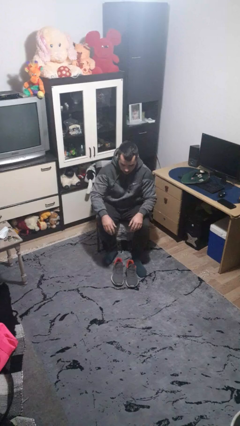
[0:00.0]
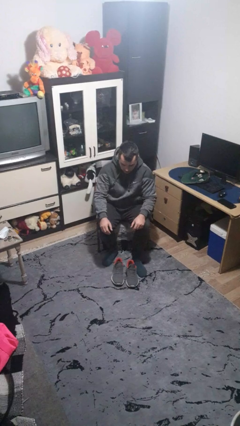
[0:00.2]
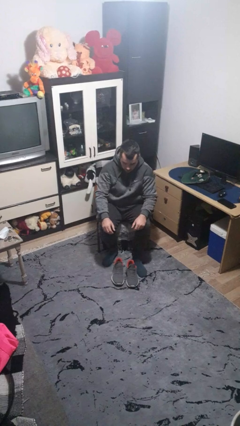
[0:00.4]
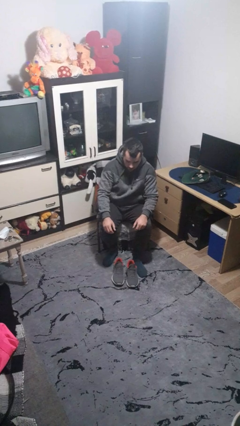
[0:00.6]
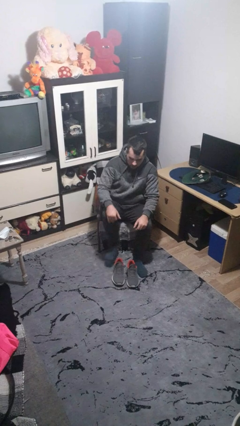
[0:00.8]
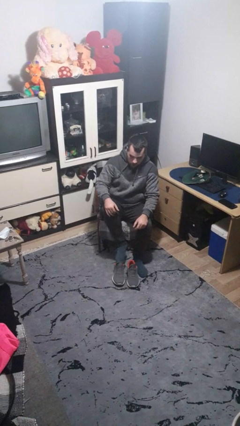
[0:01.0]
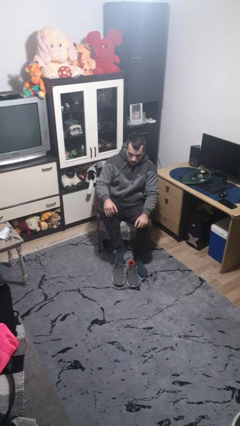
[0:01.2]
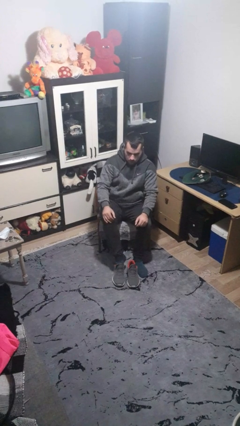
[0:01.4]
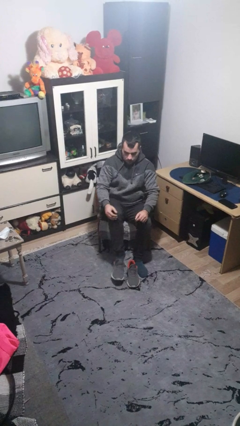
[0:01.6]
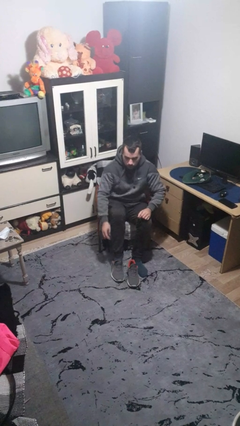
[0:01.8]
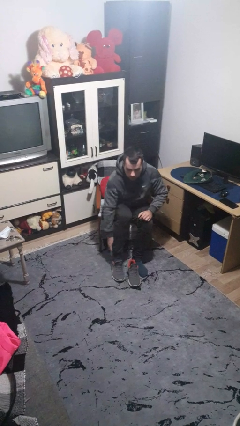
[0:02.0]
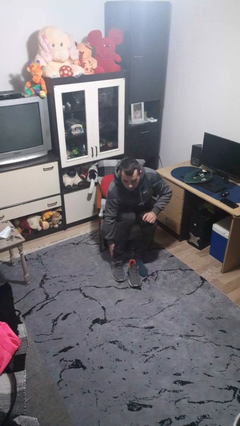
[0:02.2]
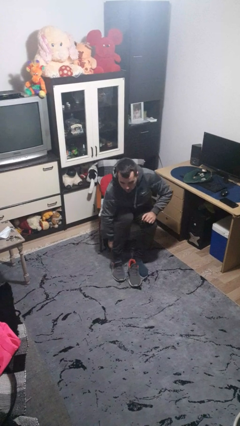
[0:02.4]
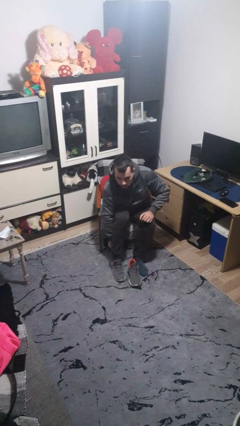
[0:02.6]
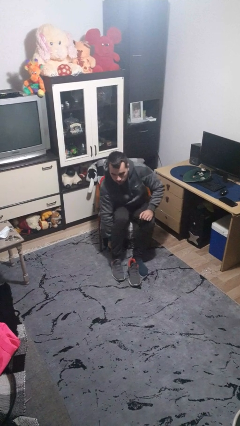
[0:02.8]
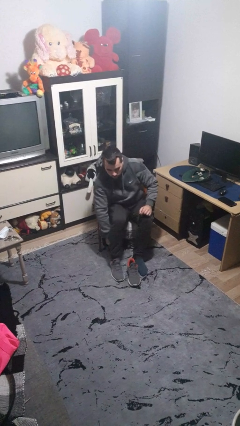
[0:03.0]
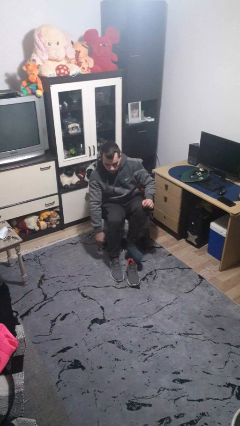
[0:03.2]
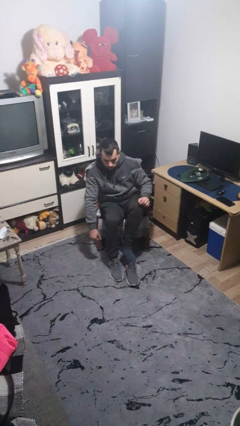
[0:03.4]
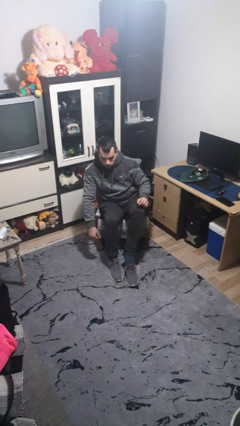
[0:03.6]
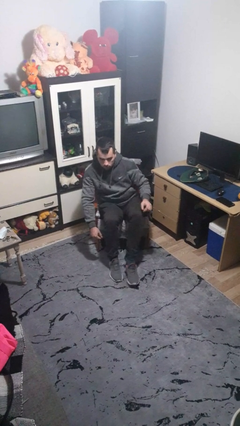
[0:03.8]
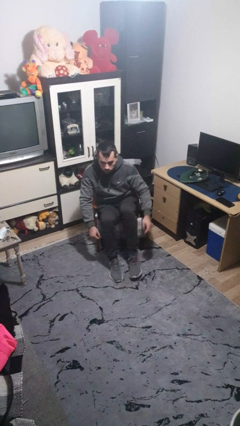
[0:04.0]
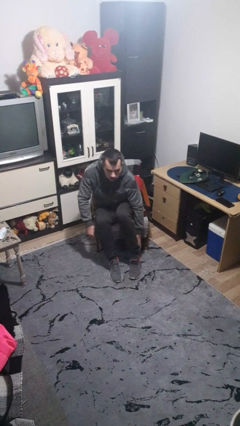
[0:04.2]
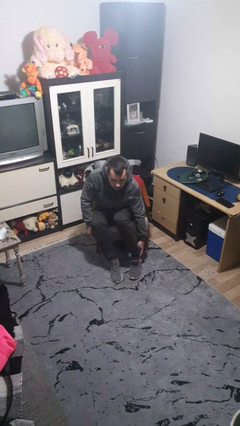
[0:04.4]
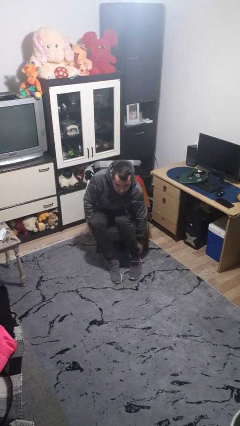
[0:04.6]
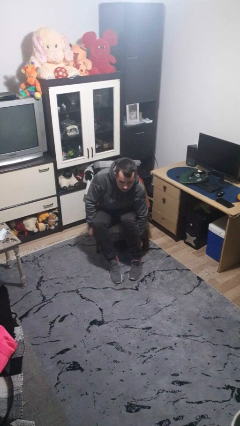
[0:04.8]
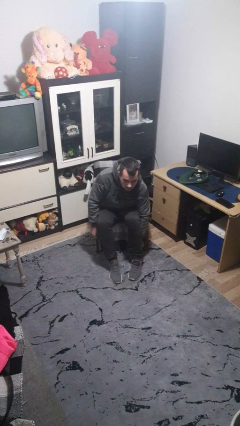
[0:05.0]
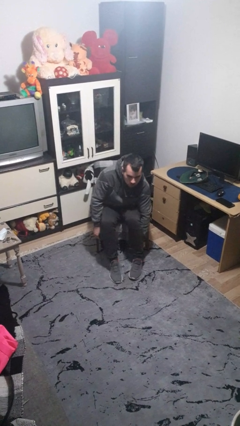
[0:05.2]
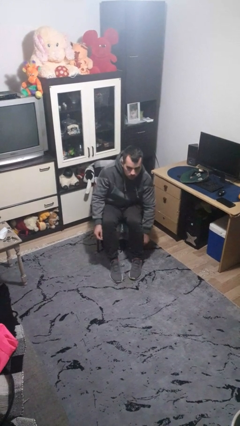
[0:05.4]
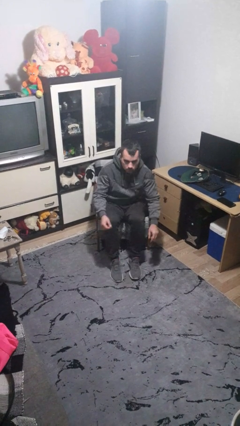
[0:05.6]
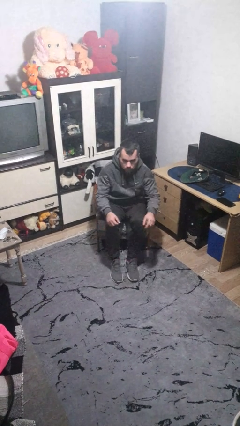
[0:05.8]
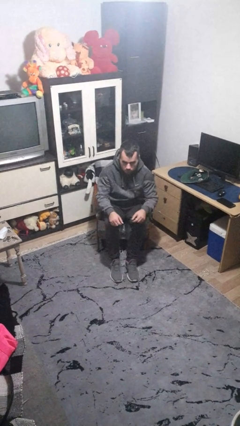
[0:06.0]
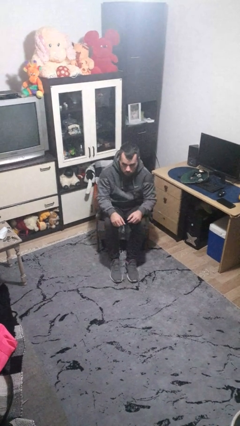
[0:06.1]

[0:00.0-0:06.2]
person puts on shoes

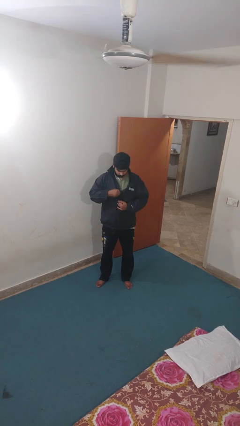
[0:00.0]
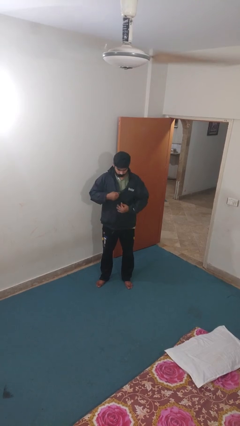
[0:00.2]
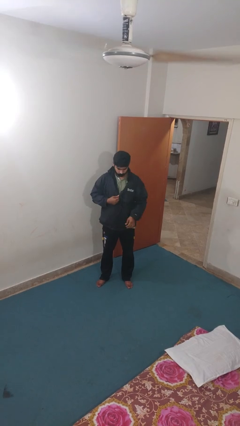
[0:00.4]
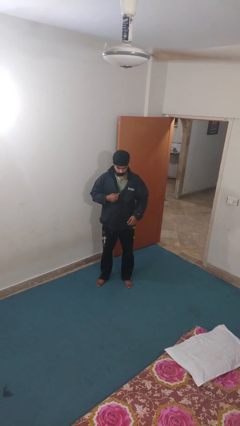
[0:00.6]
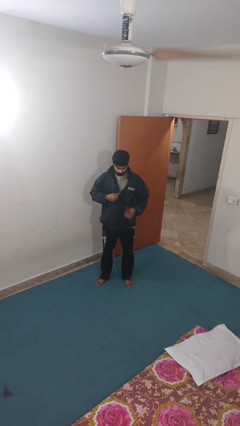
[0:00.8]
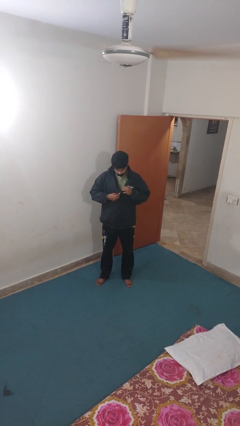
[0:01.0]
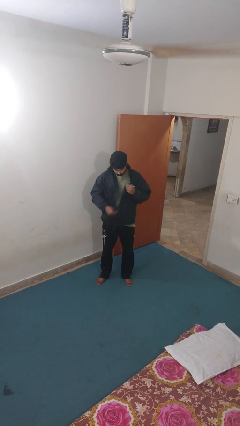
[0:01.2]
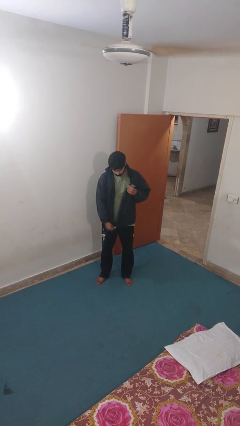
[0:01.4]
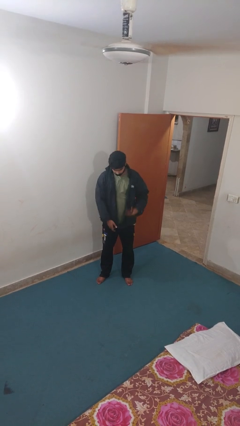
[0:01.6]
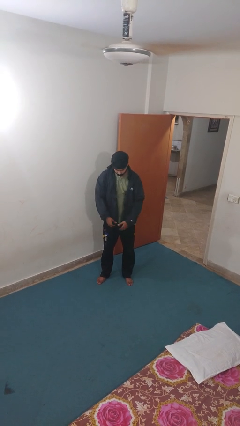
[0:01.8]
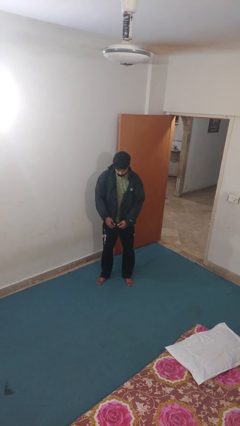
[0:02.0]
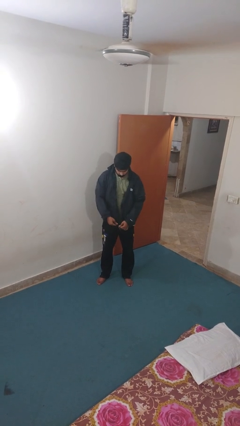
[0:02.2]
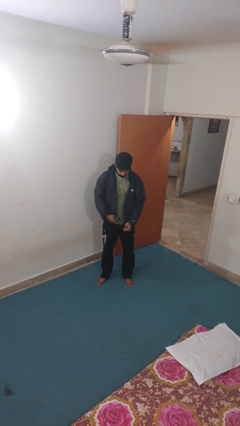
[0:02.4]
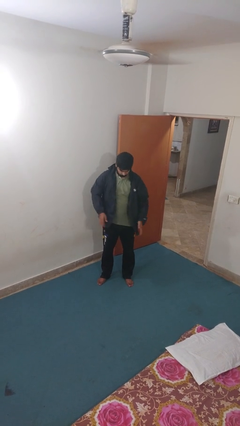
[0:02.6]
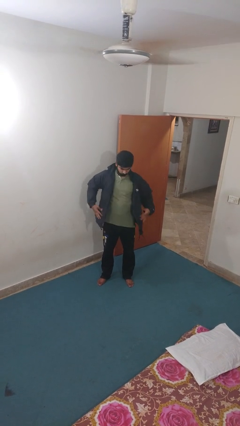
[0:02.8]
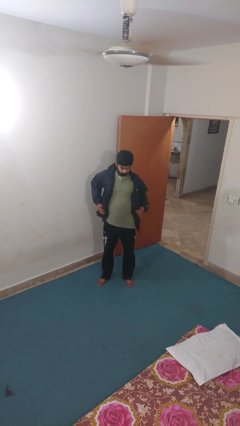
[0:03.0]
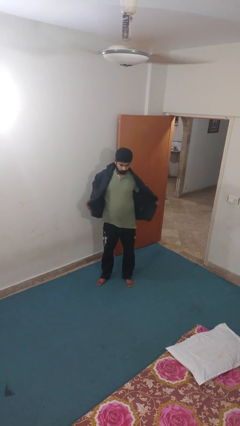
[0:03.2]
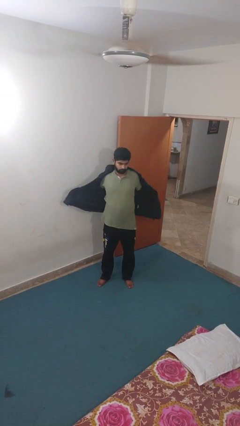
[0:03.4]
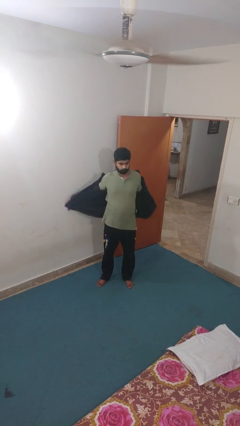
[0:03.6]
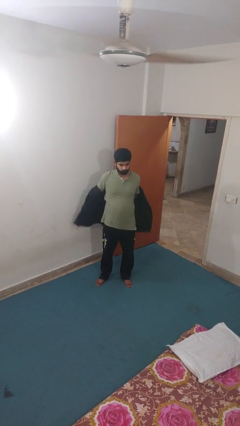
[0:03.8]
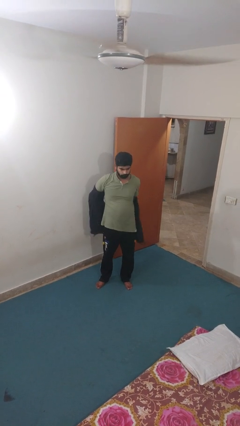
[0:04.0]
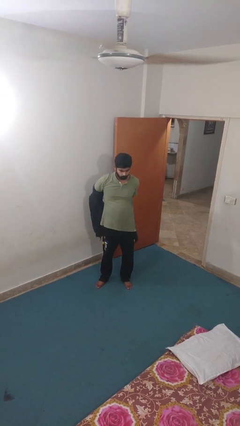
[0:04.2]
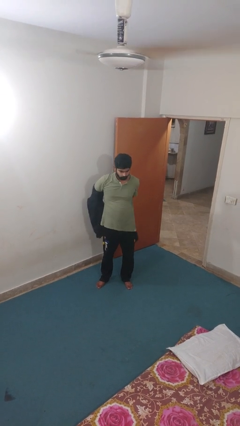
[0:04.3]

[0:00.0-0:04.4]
person unzips jacket

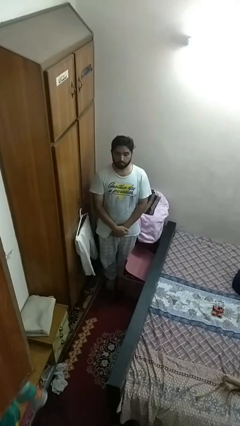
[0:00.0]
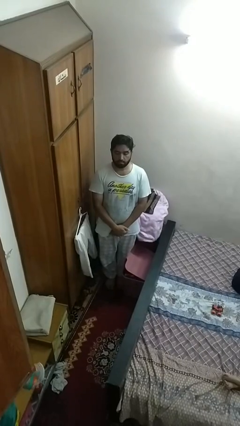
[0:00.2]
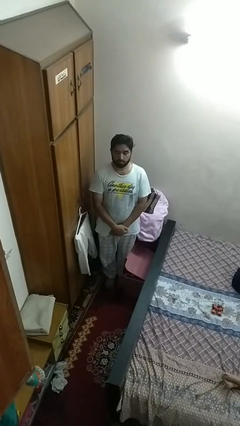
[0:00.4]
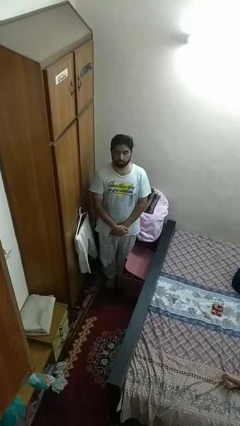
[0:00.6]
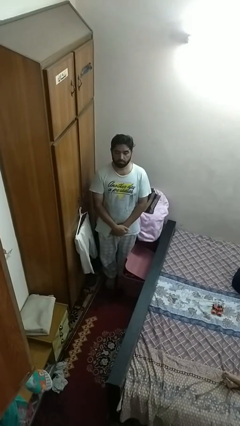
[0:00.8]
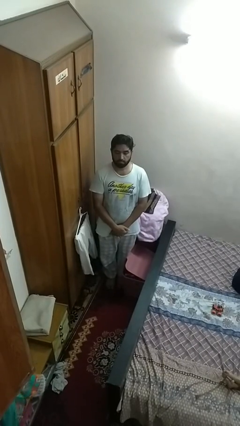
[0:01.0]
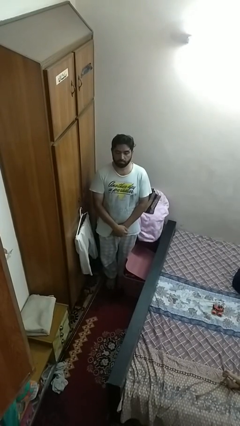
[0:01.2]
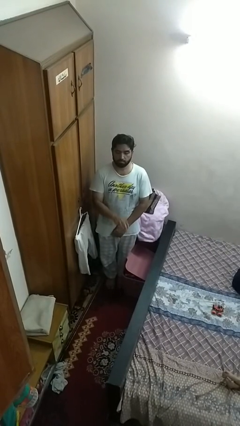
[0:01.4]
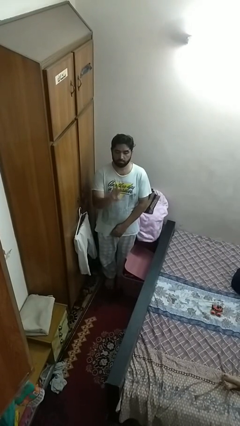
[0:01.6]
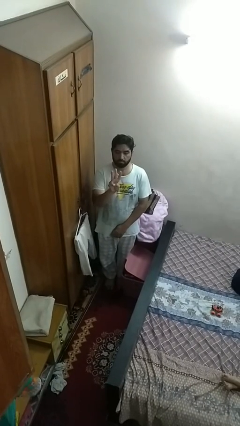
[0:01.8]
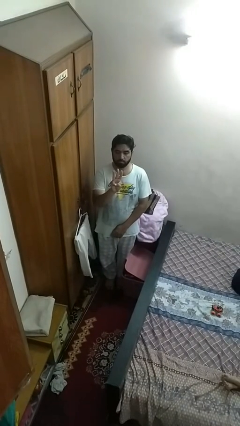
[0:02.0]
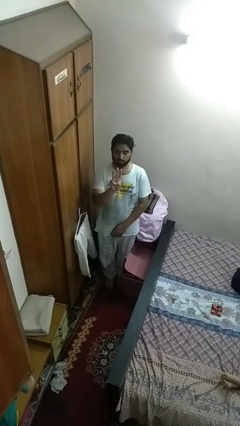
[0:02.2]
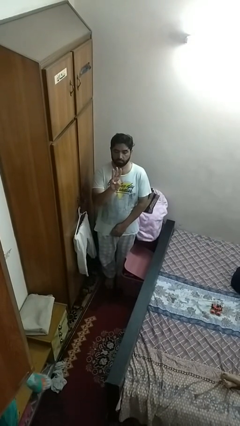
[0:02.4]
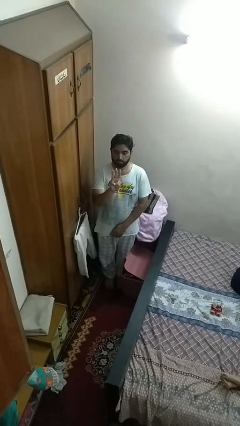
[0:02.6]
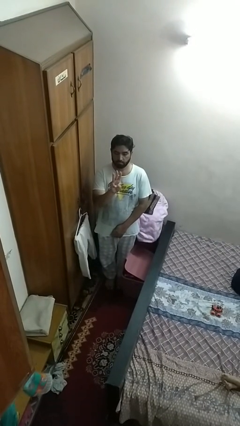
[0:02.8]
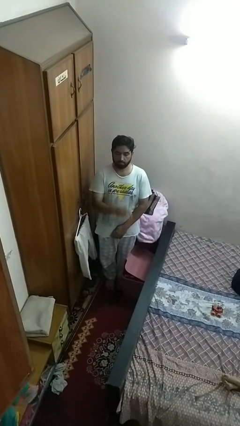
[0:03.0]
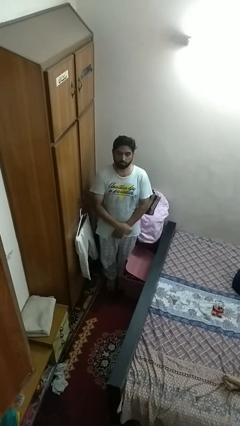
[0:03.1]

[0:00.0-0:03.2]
person gestures number three

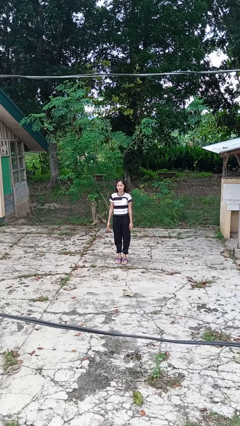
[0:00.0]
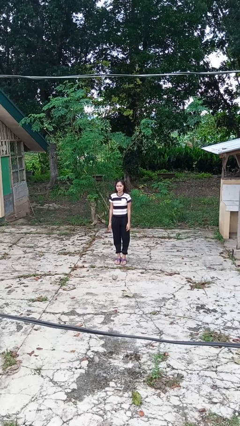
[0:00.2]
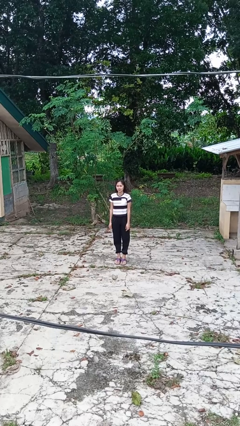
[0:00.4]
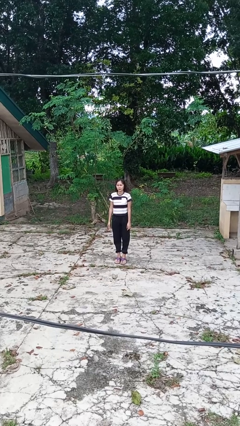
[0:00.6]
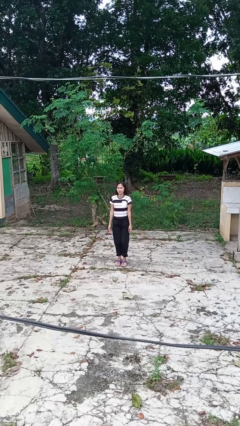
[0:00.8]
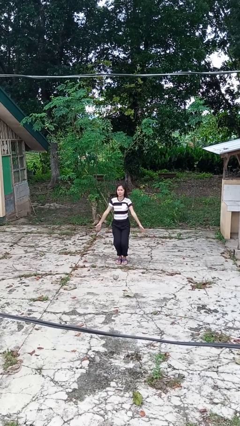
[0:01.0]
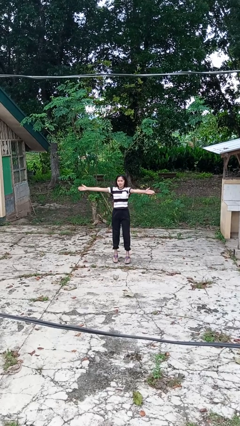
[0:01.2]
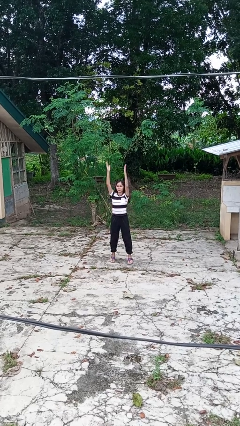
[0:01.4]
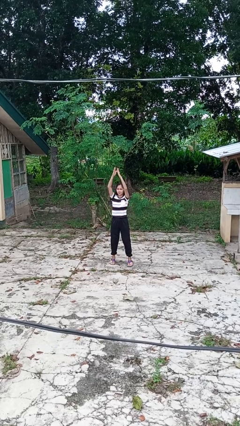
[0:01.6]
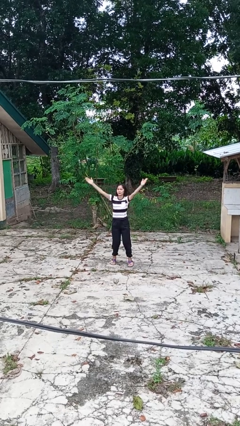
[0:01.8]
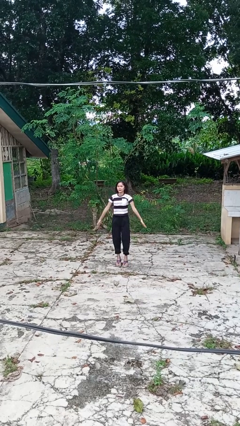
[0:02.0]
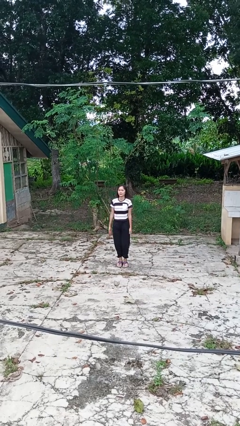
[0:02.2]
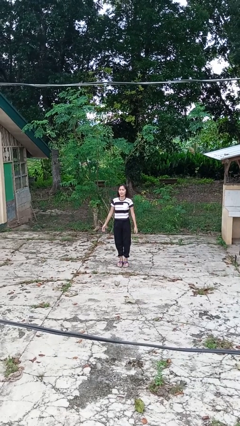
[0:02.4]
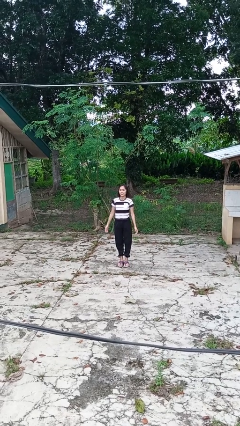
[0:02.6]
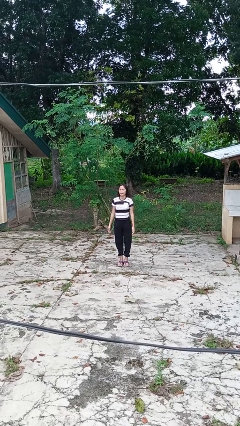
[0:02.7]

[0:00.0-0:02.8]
person exercises with jumping jacks

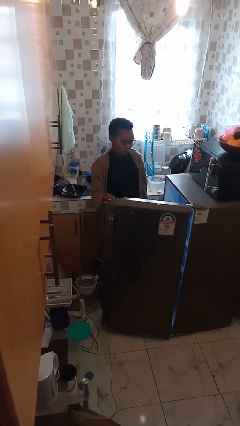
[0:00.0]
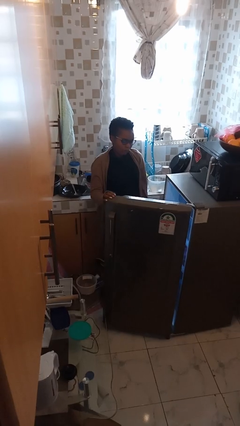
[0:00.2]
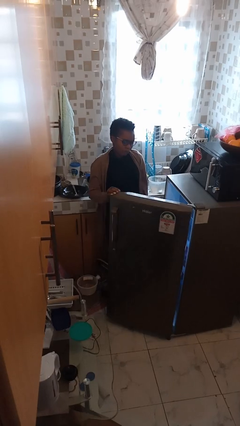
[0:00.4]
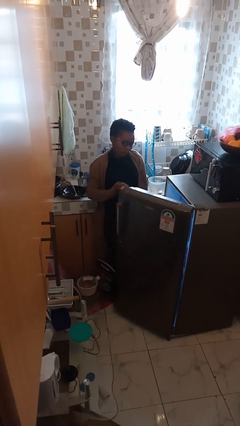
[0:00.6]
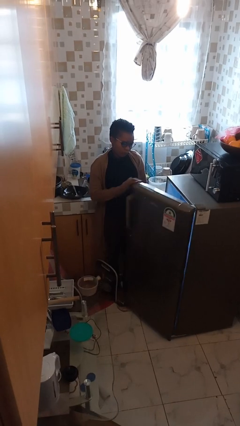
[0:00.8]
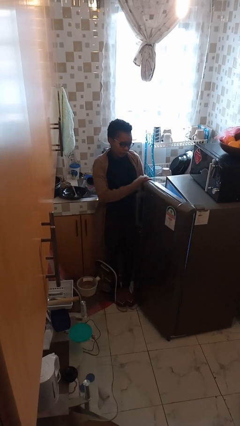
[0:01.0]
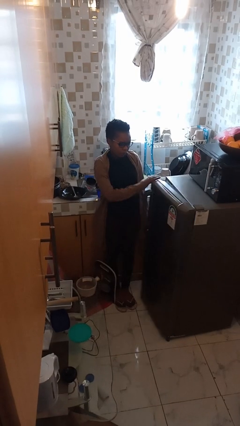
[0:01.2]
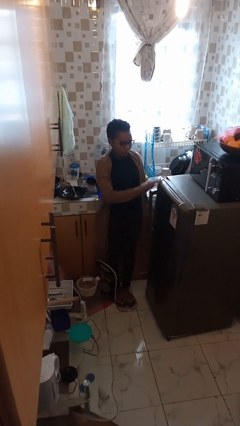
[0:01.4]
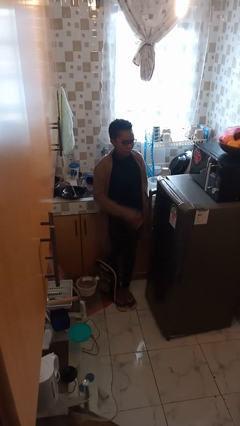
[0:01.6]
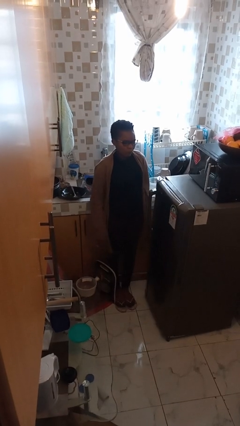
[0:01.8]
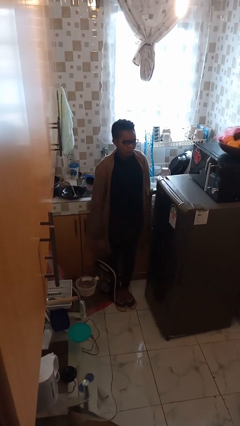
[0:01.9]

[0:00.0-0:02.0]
person closes refrigerator
